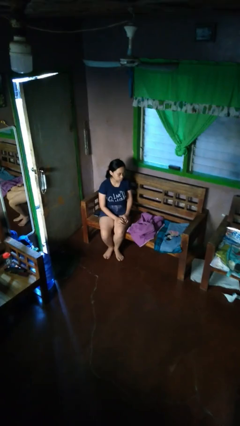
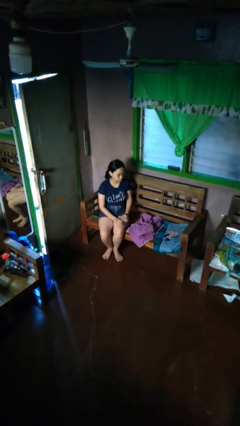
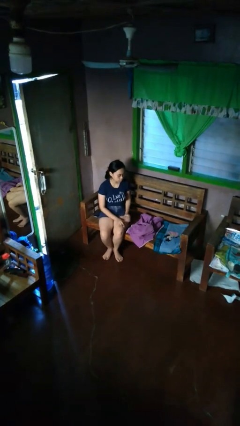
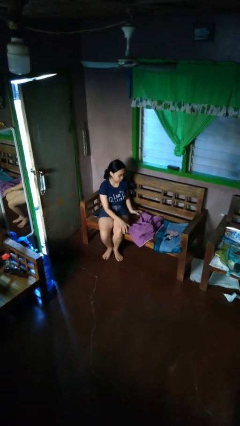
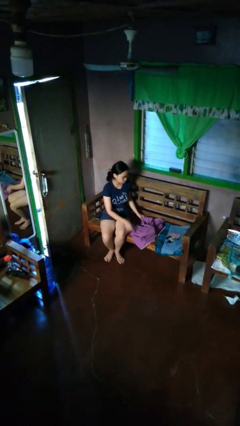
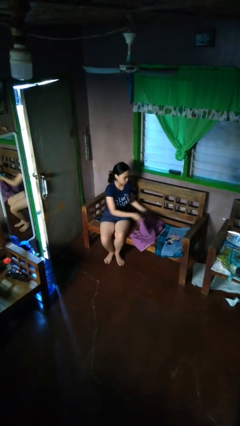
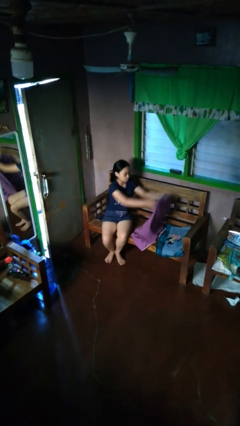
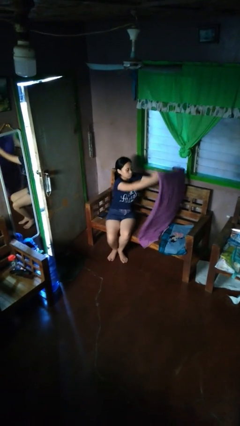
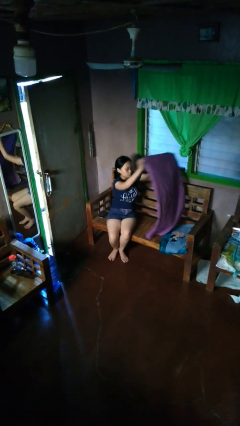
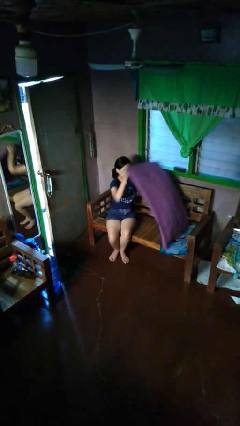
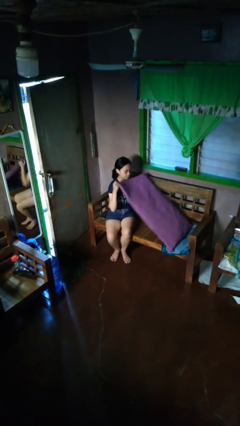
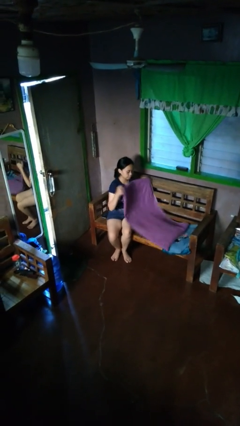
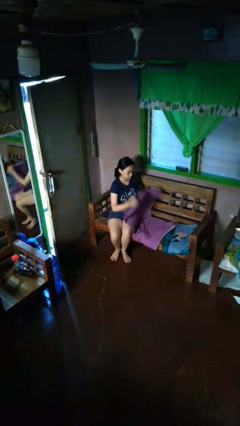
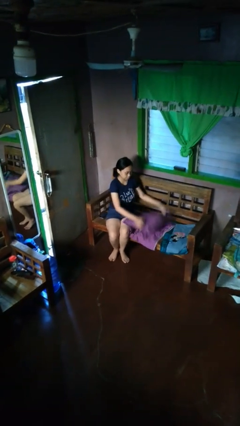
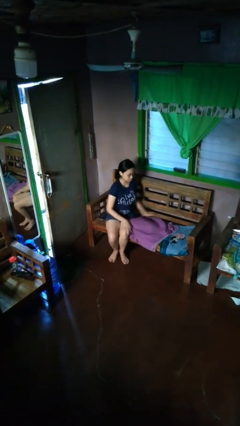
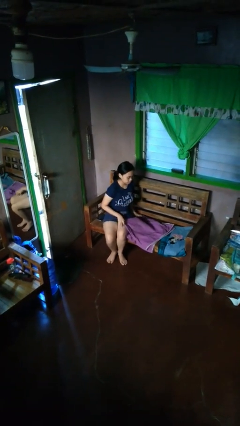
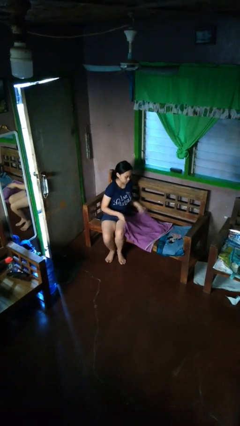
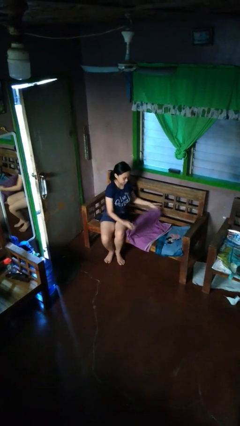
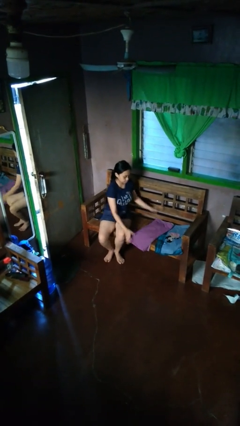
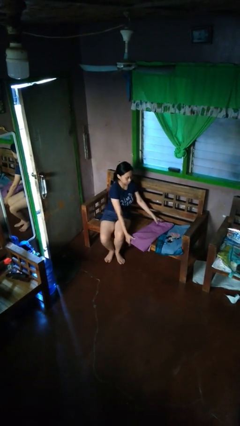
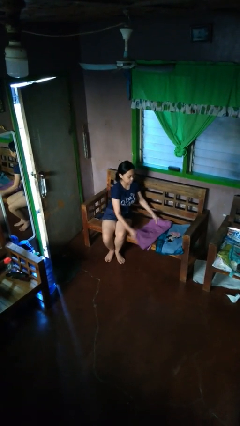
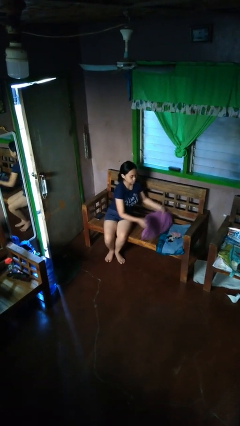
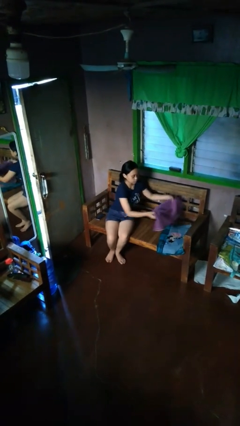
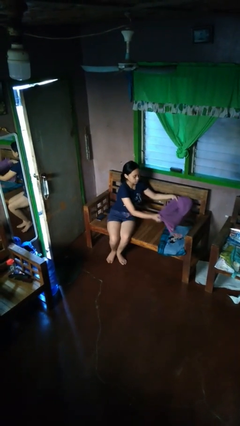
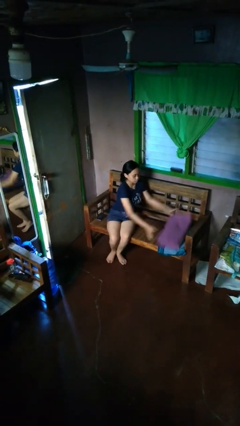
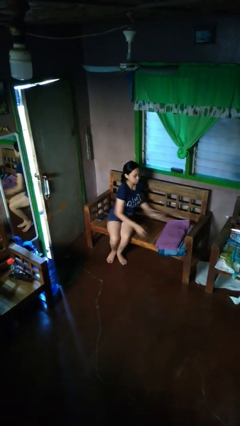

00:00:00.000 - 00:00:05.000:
person folds blanket

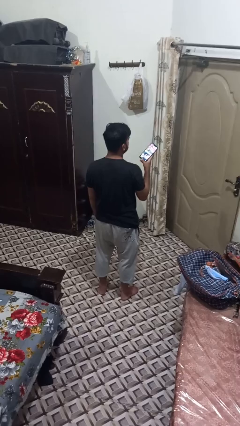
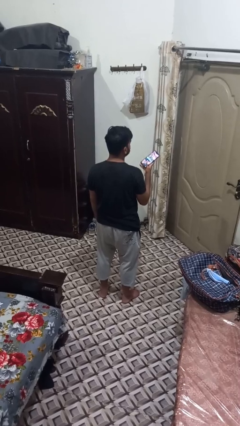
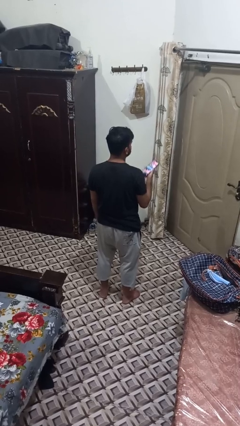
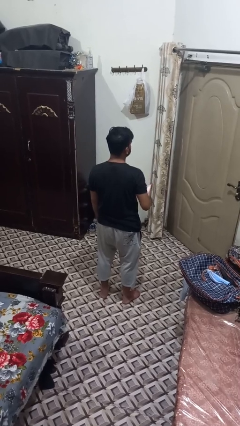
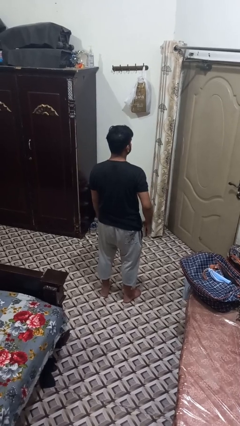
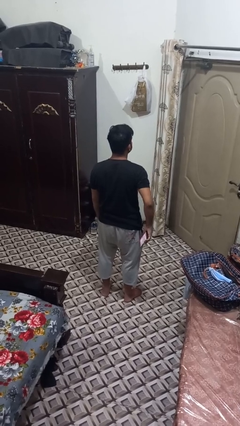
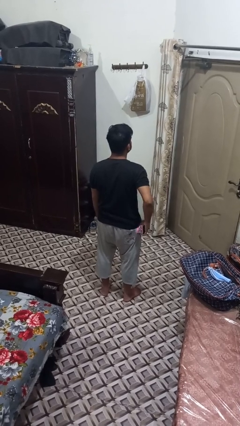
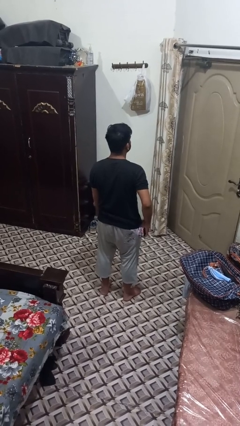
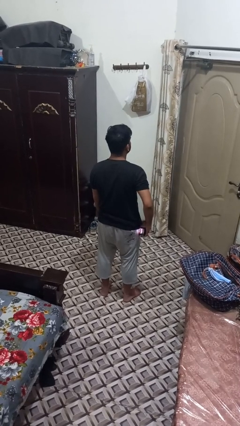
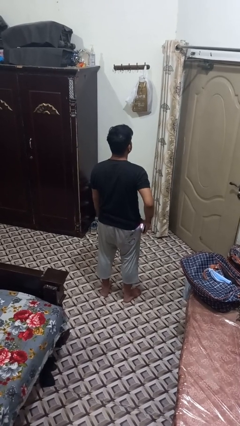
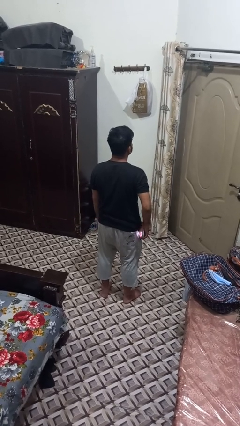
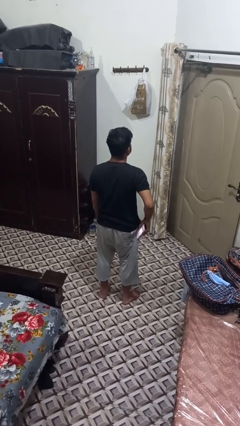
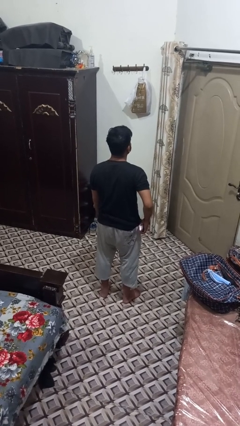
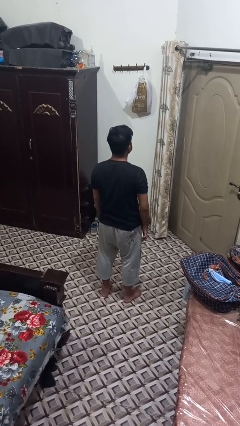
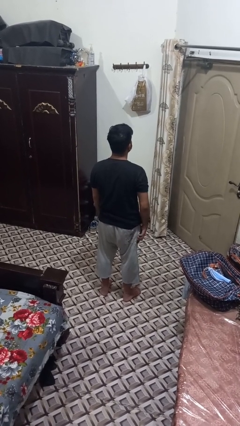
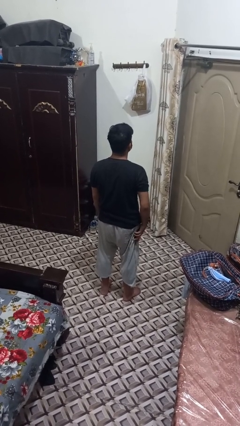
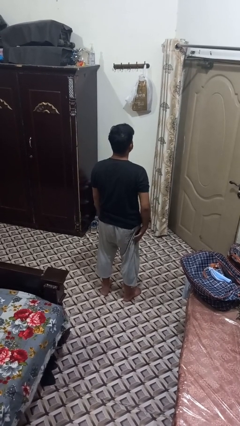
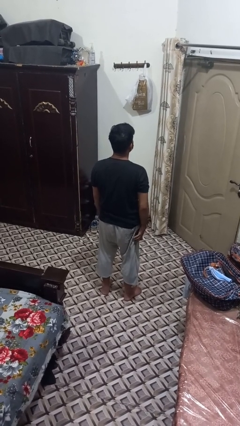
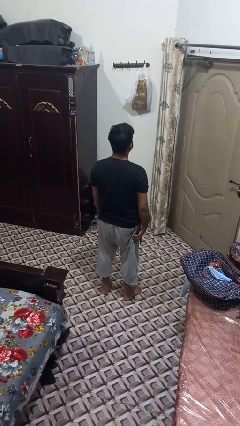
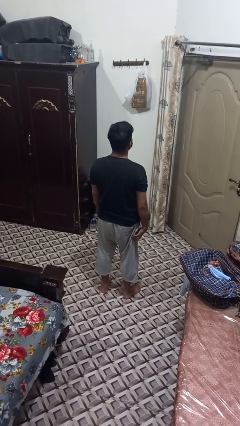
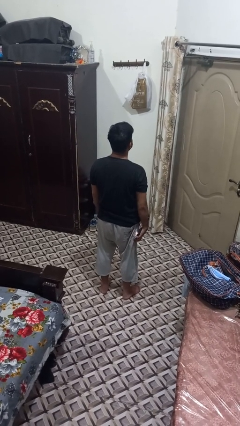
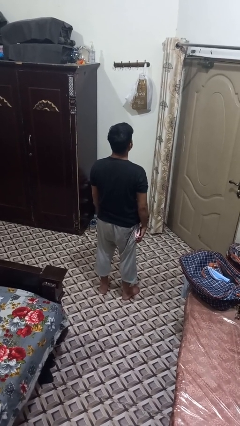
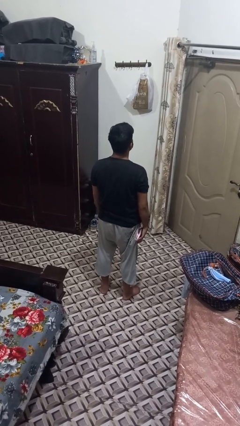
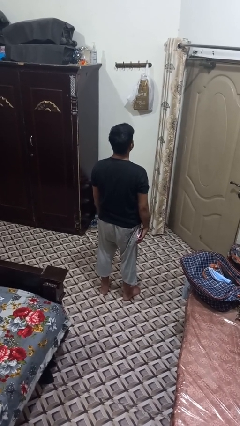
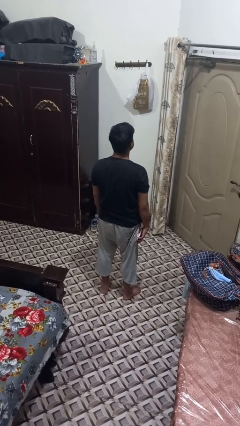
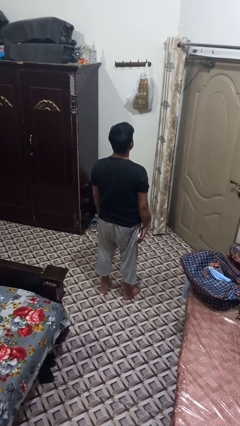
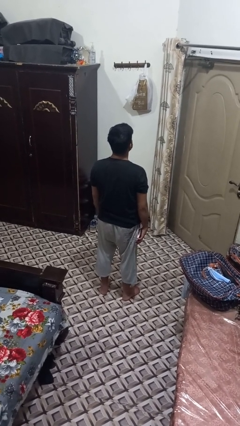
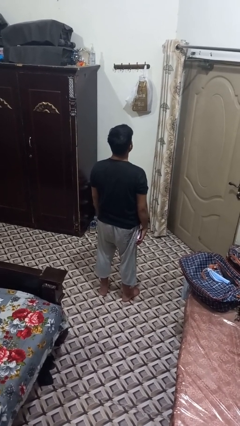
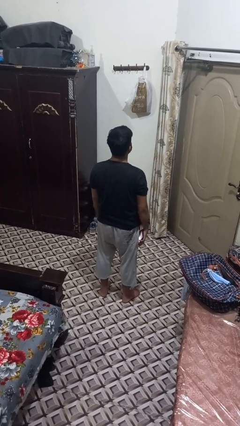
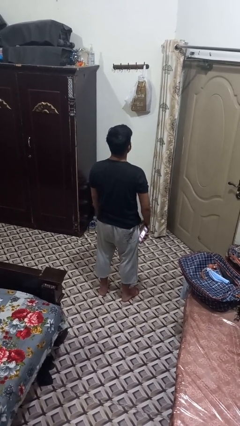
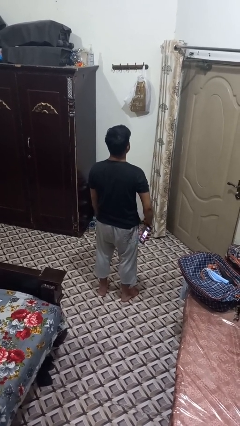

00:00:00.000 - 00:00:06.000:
person puts phone into pocket

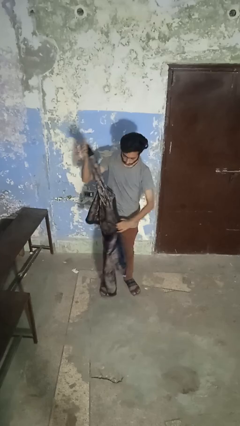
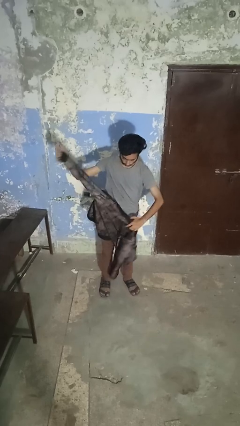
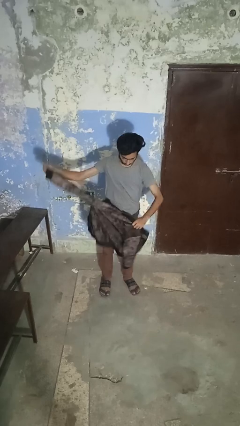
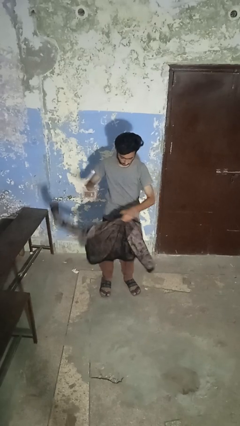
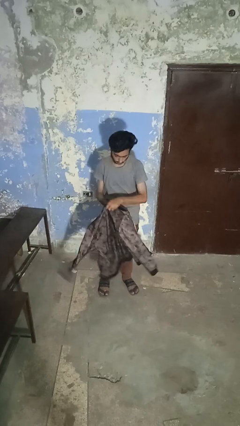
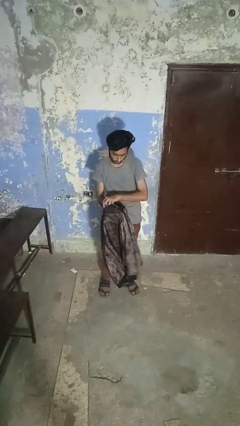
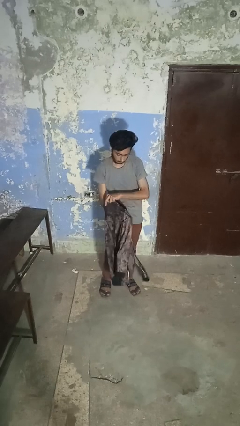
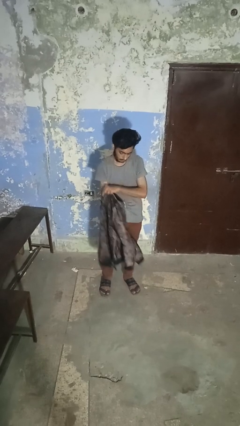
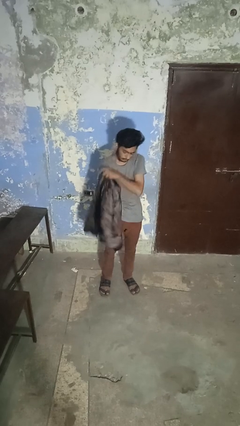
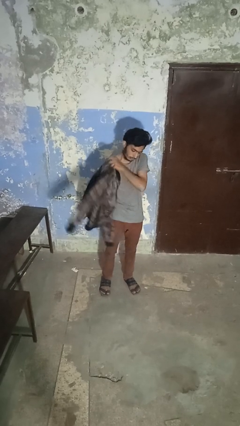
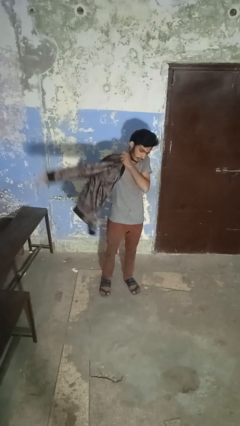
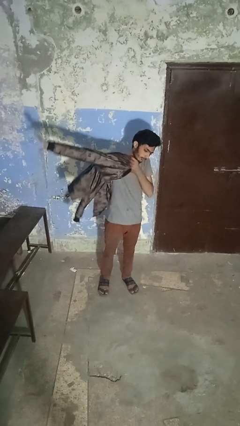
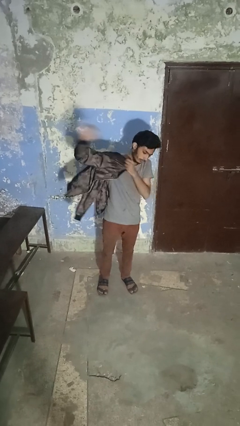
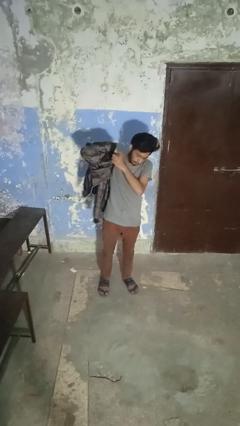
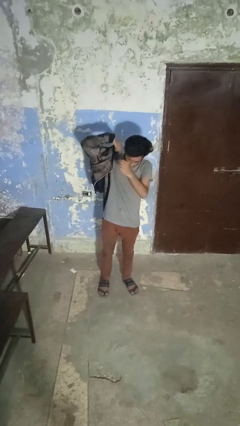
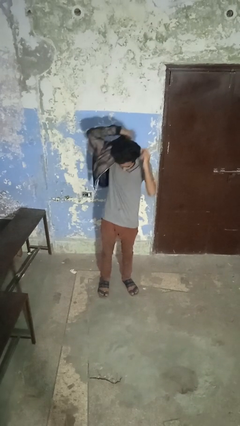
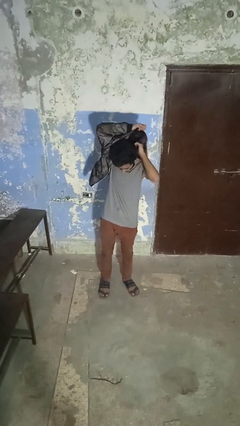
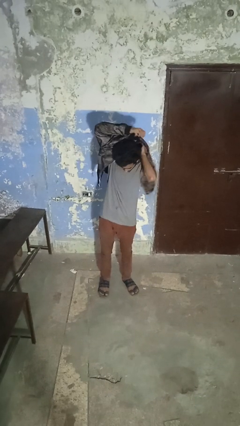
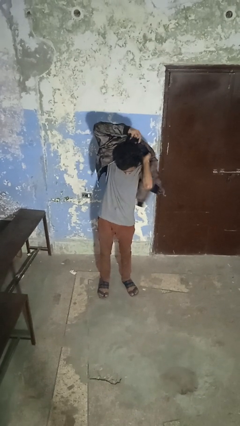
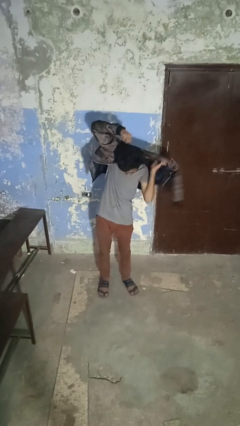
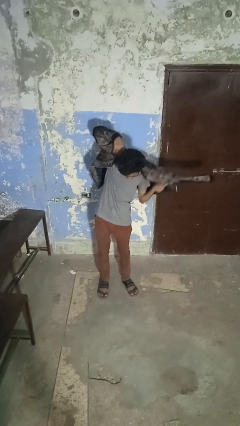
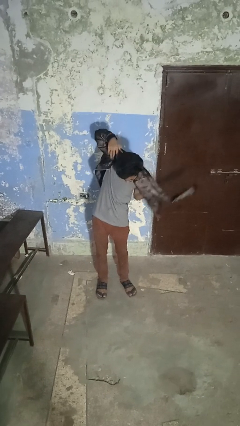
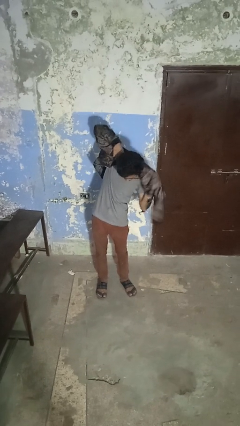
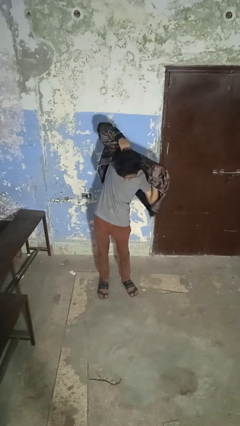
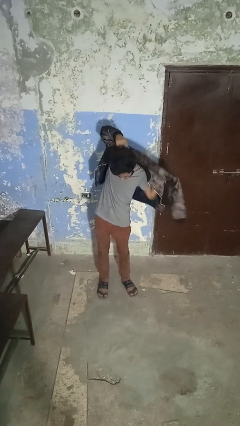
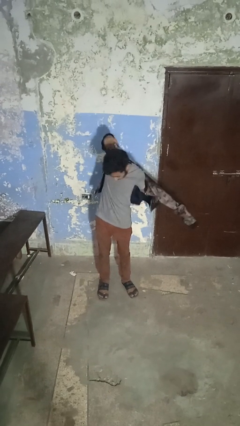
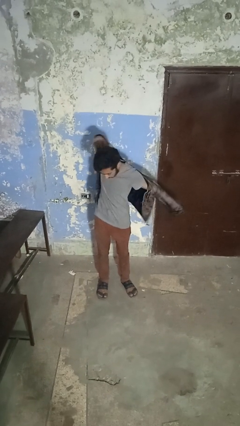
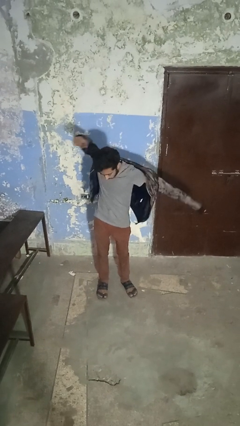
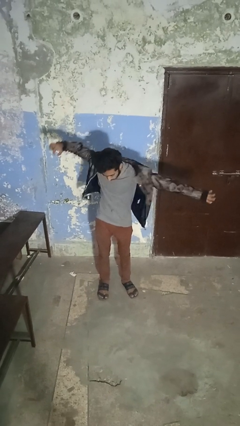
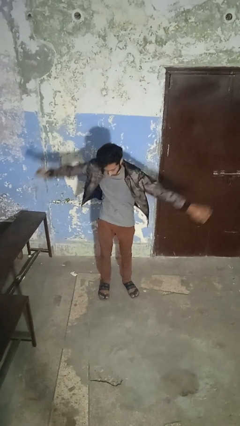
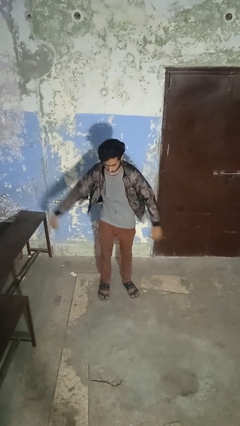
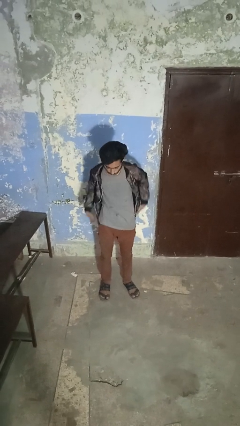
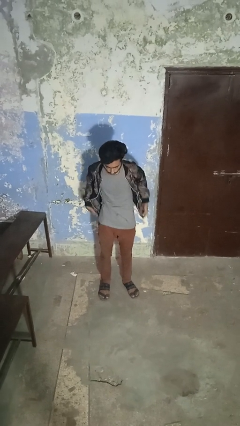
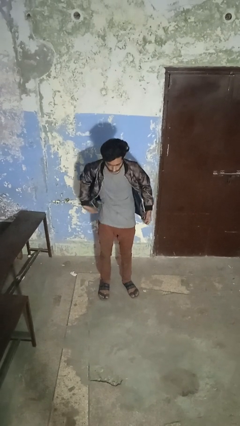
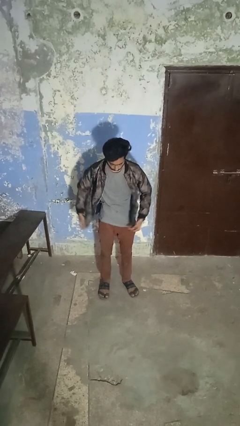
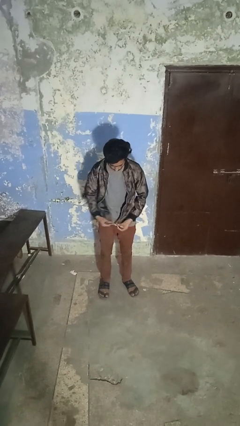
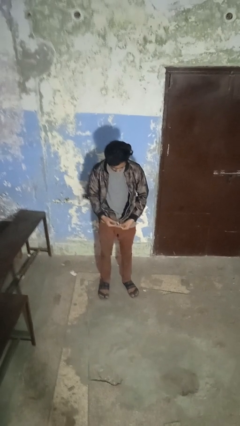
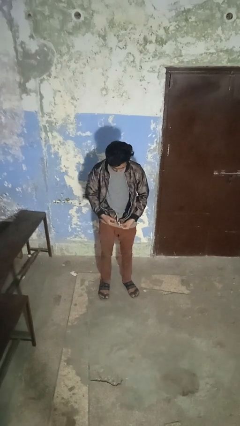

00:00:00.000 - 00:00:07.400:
person puts on jacket
